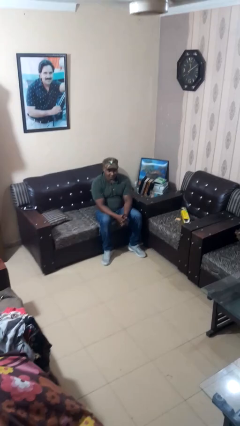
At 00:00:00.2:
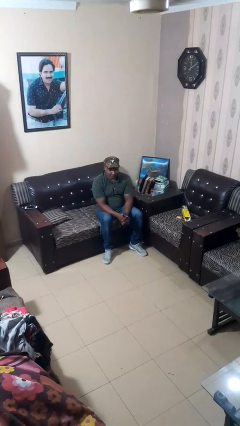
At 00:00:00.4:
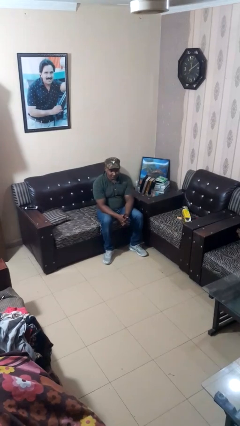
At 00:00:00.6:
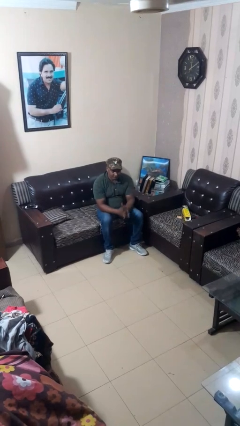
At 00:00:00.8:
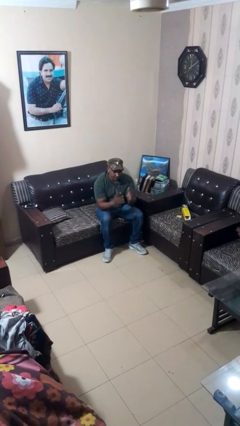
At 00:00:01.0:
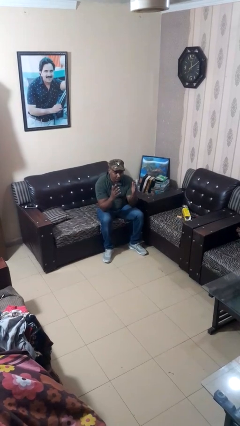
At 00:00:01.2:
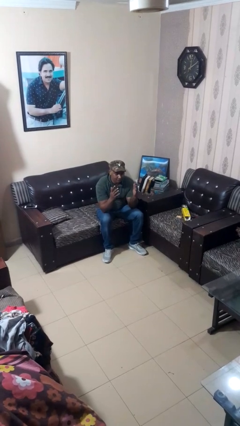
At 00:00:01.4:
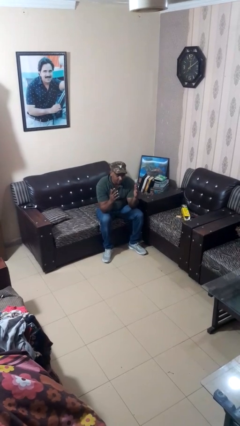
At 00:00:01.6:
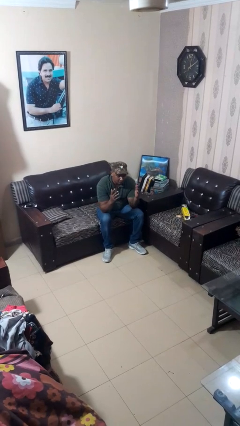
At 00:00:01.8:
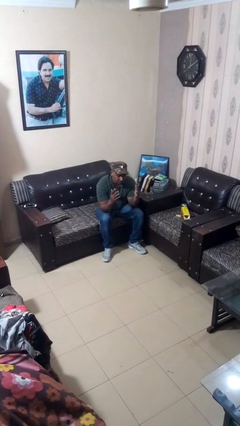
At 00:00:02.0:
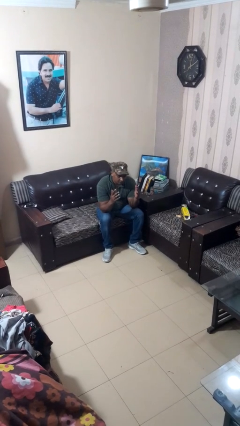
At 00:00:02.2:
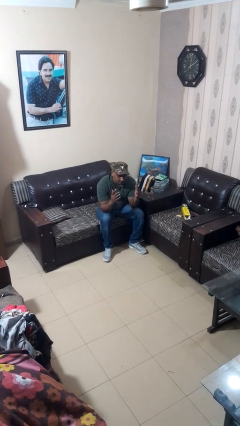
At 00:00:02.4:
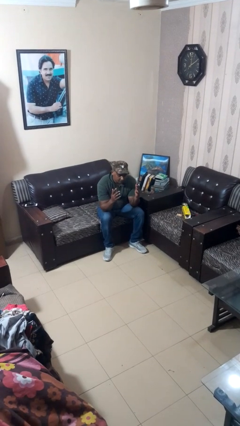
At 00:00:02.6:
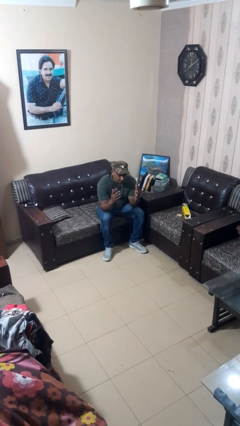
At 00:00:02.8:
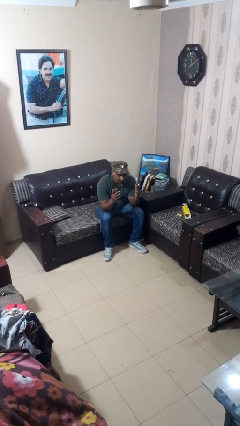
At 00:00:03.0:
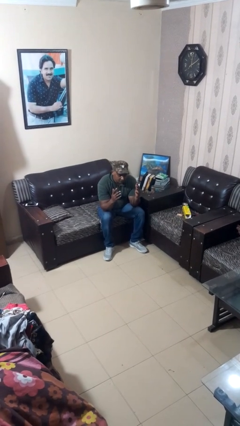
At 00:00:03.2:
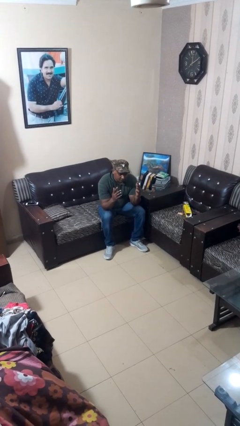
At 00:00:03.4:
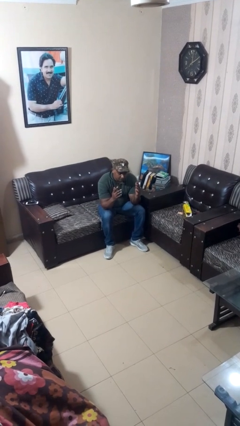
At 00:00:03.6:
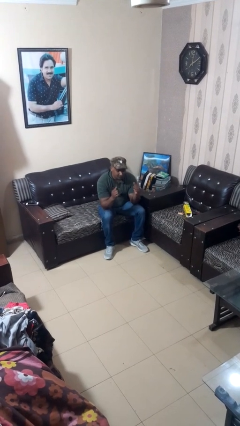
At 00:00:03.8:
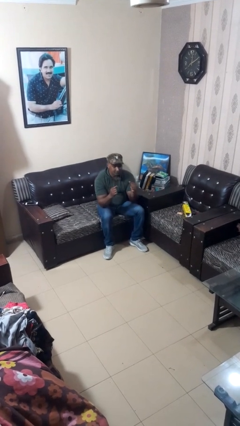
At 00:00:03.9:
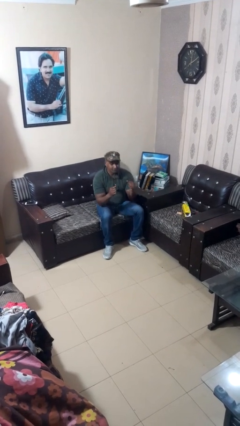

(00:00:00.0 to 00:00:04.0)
person prays

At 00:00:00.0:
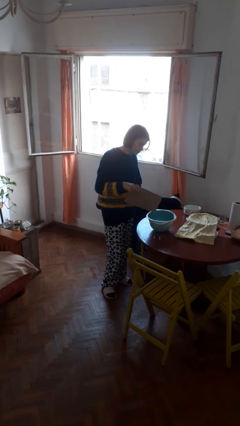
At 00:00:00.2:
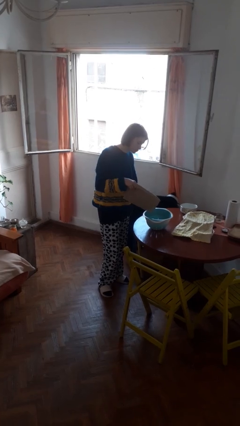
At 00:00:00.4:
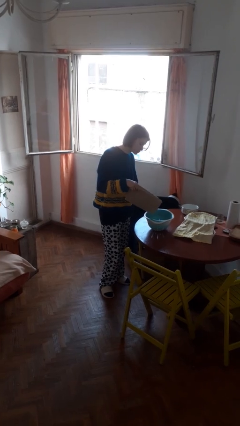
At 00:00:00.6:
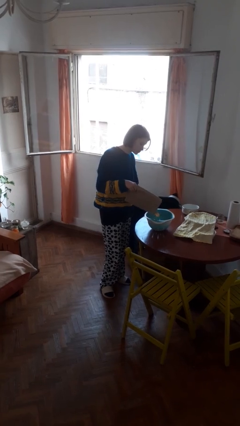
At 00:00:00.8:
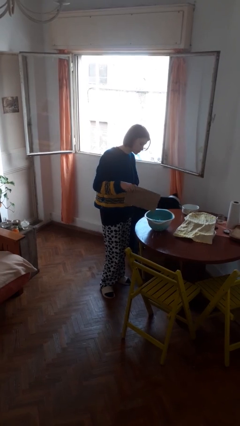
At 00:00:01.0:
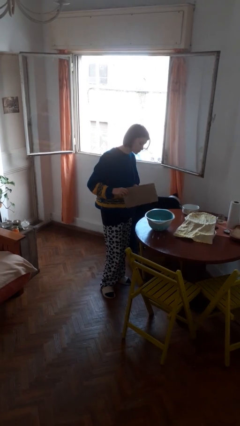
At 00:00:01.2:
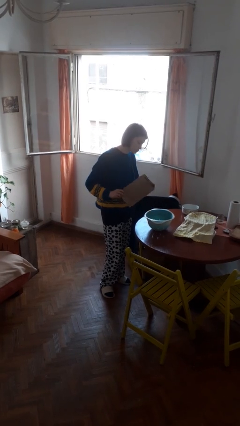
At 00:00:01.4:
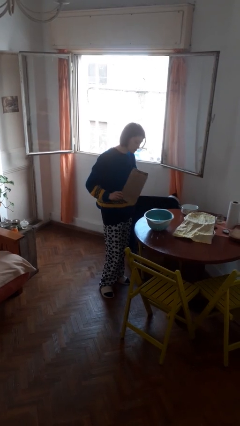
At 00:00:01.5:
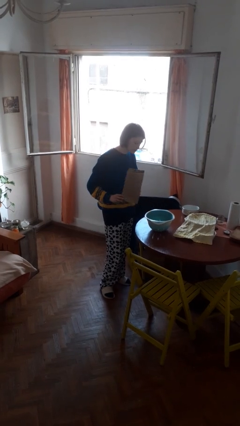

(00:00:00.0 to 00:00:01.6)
person pours into bowl

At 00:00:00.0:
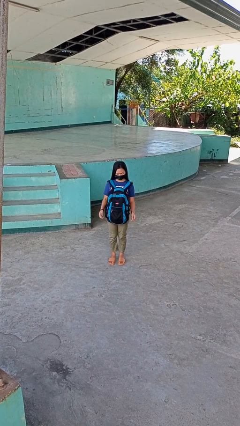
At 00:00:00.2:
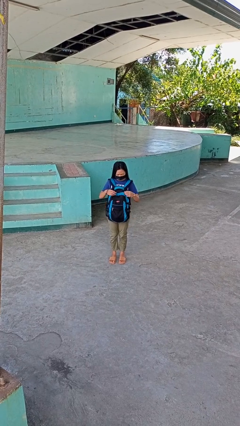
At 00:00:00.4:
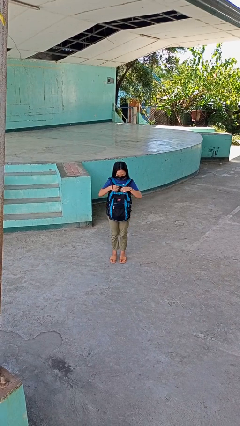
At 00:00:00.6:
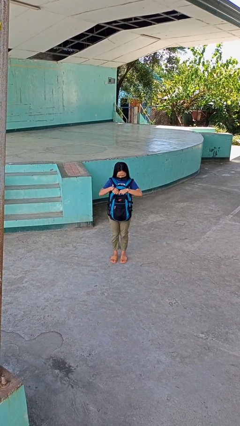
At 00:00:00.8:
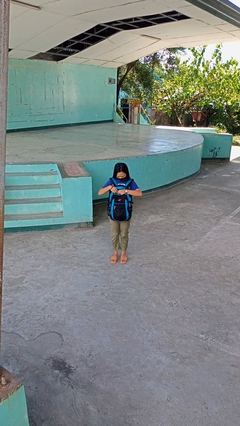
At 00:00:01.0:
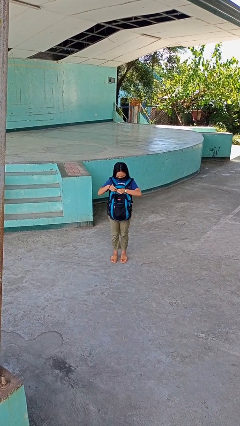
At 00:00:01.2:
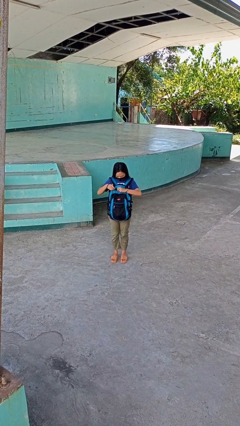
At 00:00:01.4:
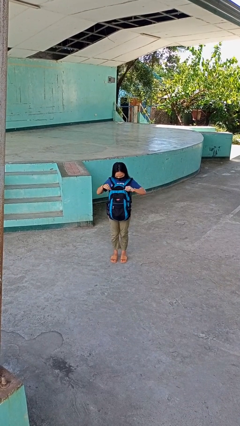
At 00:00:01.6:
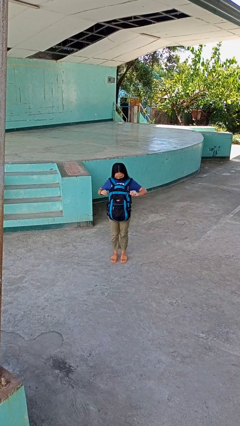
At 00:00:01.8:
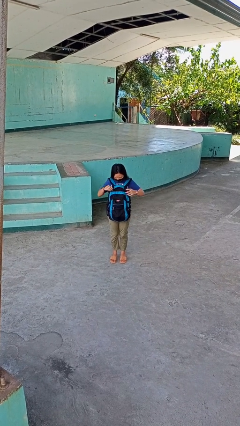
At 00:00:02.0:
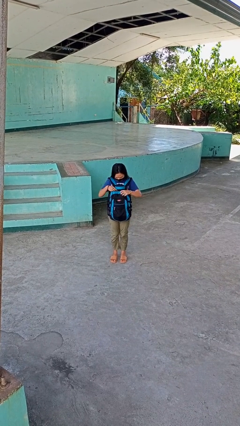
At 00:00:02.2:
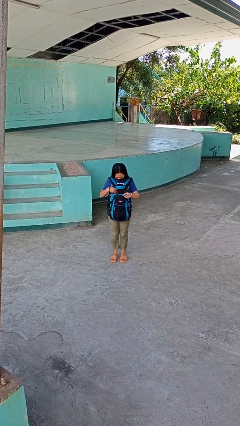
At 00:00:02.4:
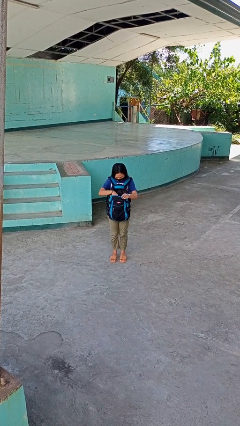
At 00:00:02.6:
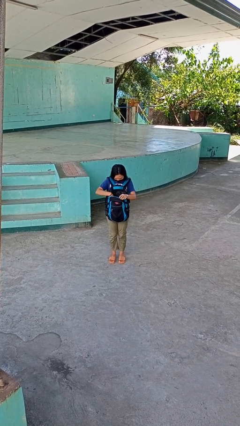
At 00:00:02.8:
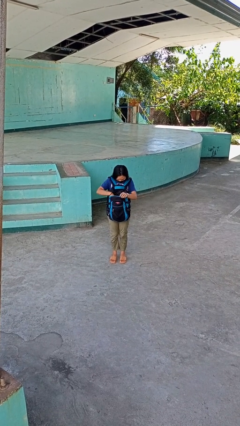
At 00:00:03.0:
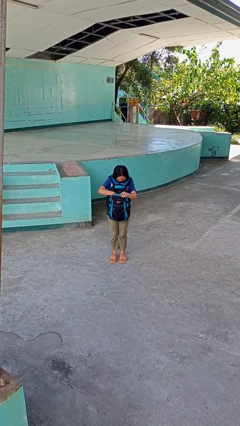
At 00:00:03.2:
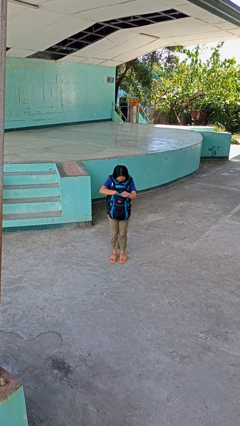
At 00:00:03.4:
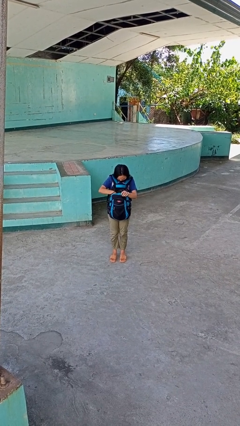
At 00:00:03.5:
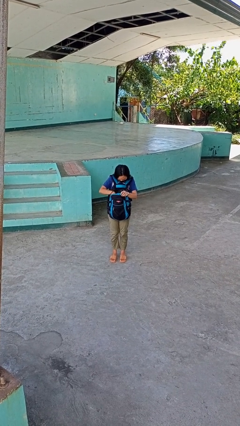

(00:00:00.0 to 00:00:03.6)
person searches in backpack

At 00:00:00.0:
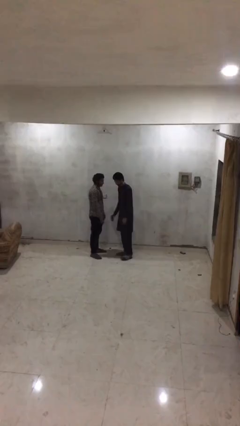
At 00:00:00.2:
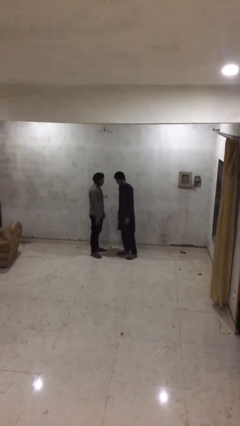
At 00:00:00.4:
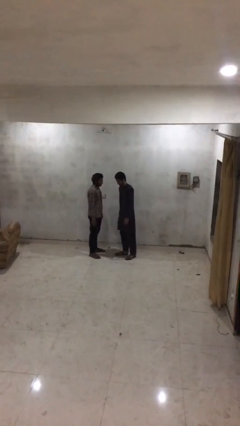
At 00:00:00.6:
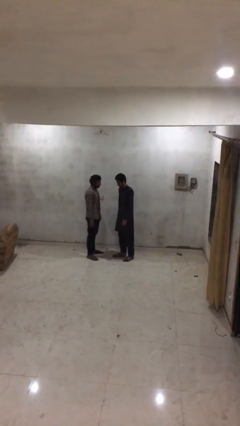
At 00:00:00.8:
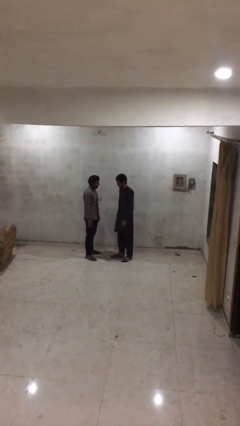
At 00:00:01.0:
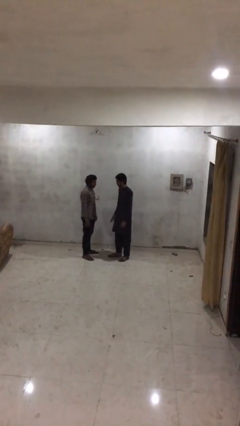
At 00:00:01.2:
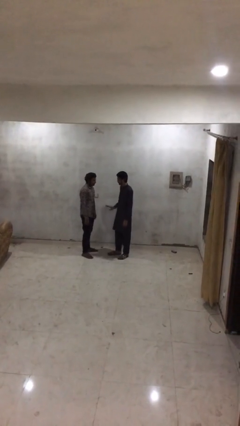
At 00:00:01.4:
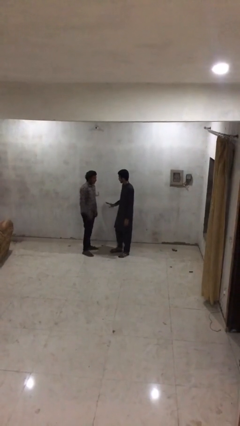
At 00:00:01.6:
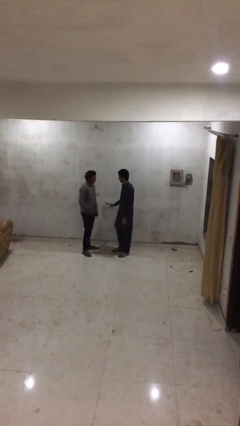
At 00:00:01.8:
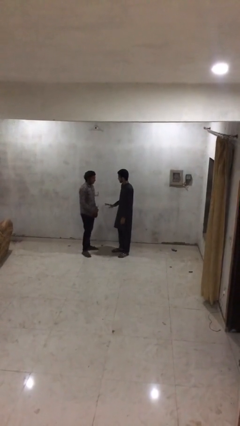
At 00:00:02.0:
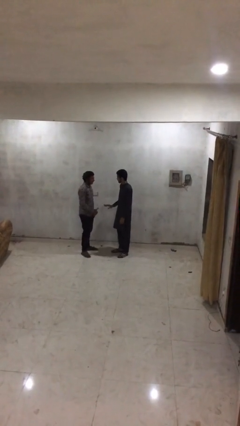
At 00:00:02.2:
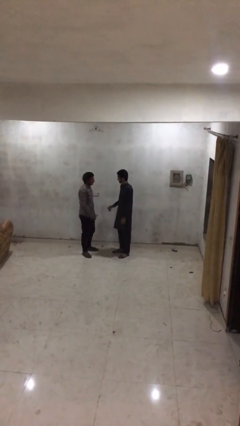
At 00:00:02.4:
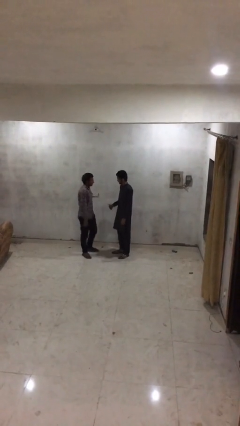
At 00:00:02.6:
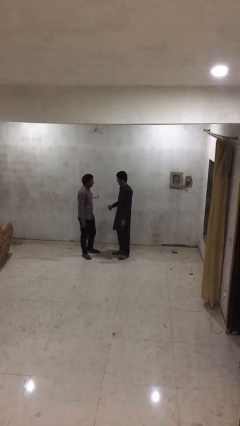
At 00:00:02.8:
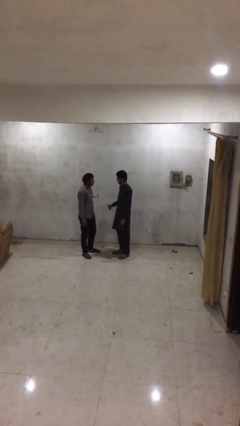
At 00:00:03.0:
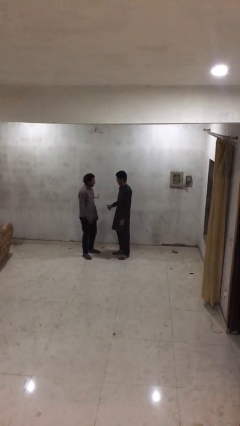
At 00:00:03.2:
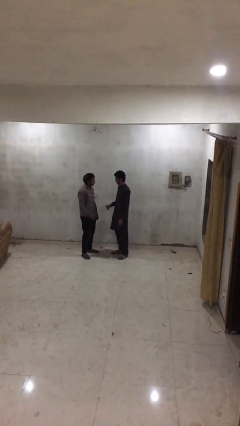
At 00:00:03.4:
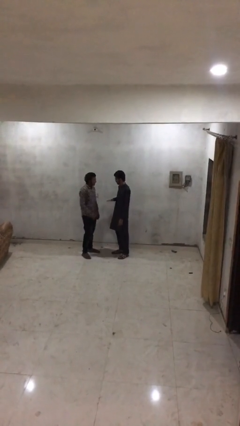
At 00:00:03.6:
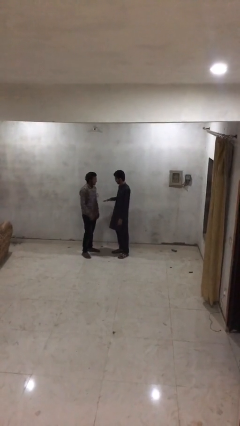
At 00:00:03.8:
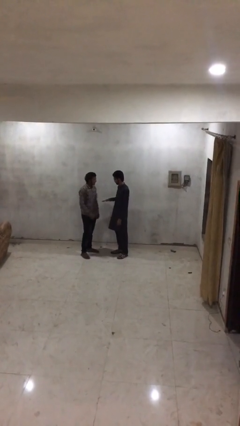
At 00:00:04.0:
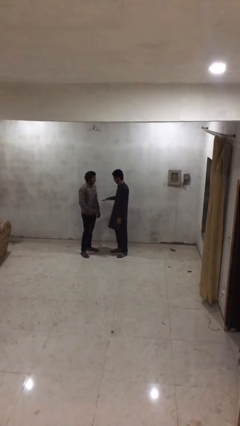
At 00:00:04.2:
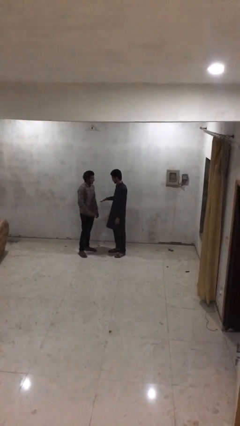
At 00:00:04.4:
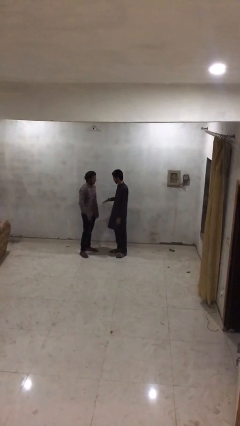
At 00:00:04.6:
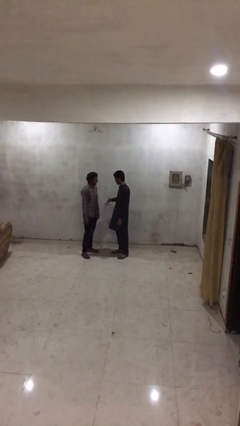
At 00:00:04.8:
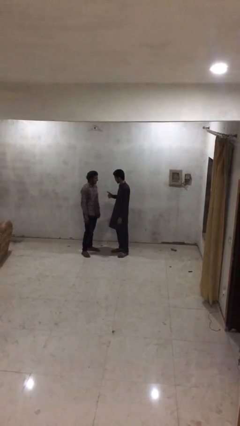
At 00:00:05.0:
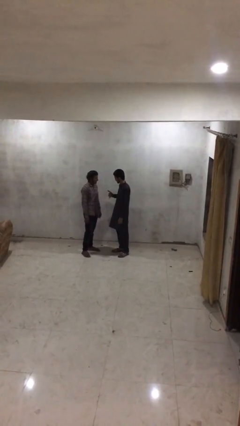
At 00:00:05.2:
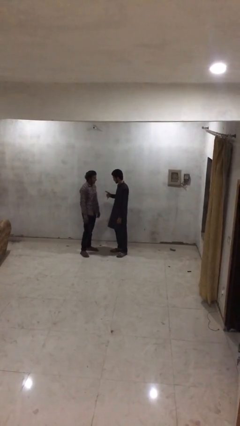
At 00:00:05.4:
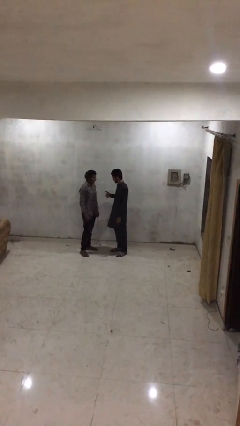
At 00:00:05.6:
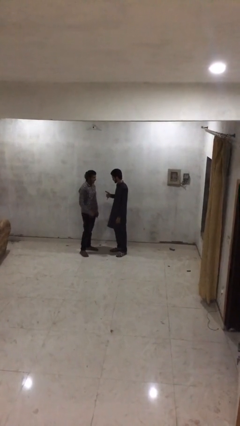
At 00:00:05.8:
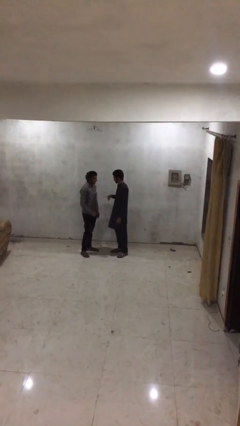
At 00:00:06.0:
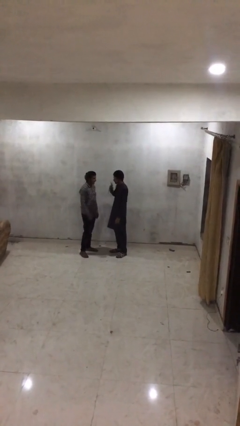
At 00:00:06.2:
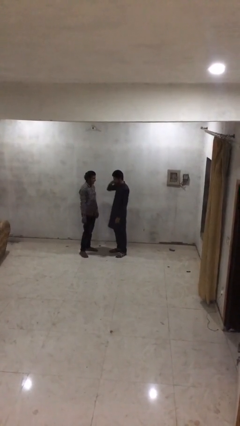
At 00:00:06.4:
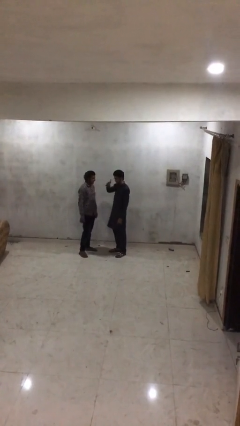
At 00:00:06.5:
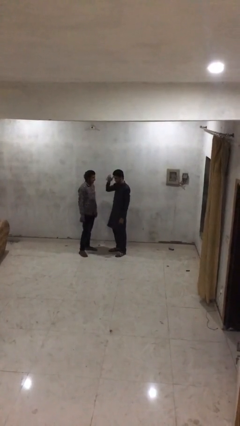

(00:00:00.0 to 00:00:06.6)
person talks to person

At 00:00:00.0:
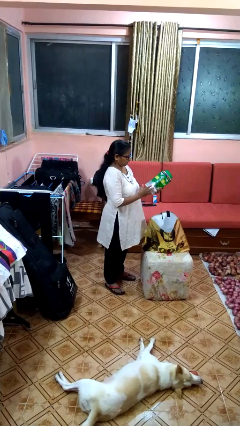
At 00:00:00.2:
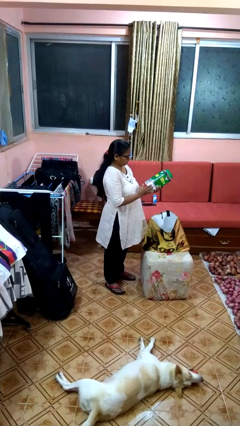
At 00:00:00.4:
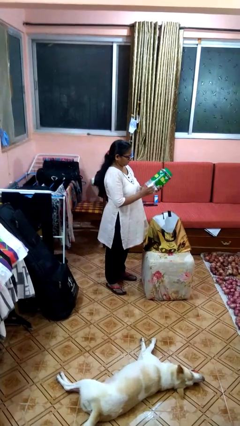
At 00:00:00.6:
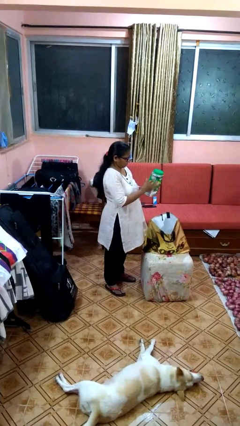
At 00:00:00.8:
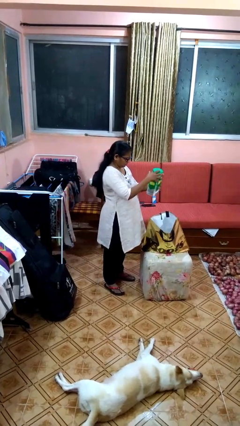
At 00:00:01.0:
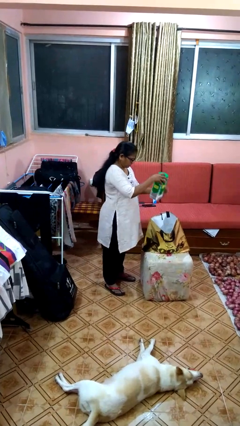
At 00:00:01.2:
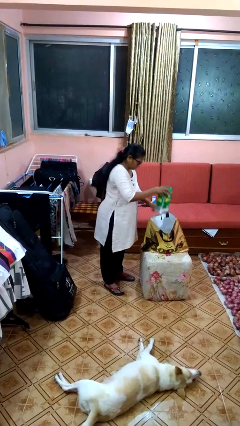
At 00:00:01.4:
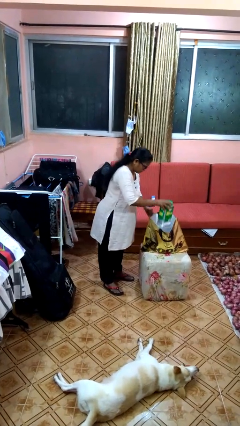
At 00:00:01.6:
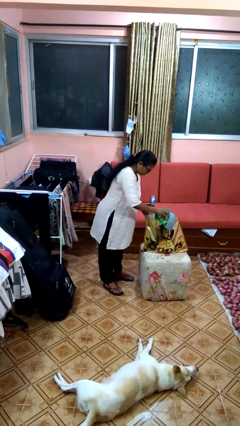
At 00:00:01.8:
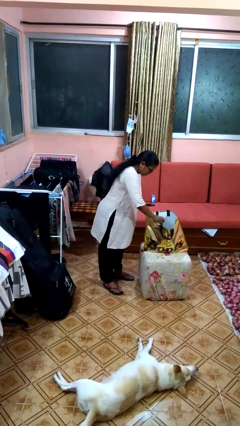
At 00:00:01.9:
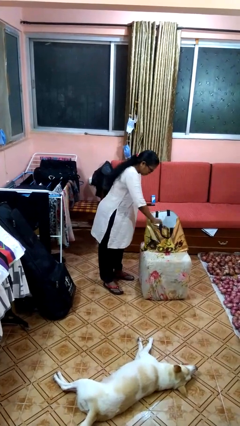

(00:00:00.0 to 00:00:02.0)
person puts object into bag
